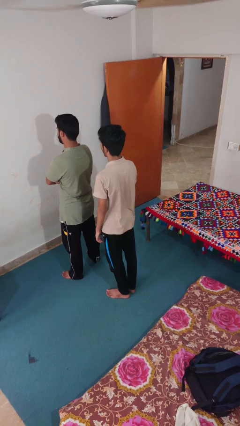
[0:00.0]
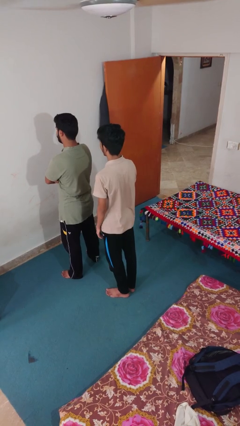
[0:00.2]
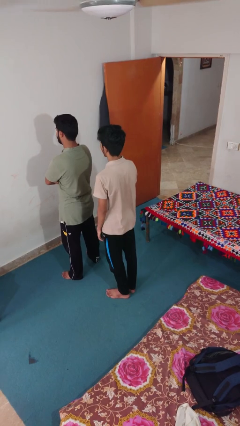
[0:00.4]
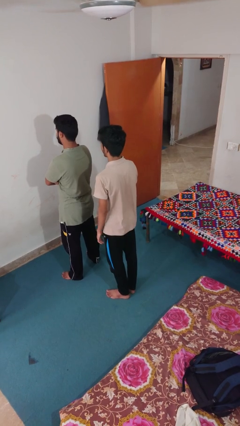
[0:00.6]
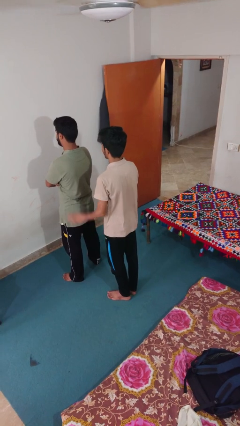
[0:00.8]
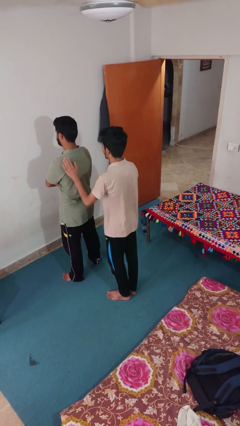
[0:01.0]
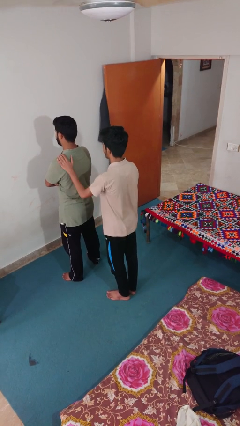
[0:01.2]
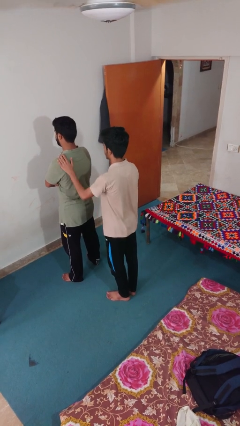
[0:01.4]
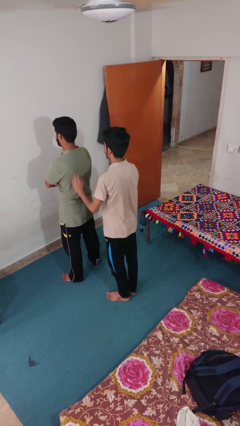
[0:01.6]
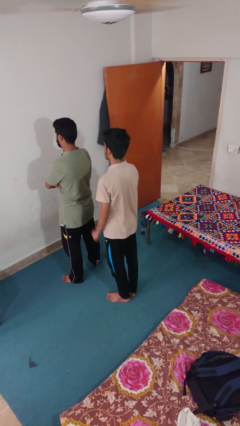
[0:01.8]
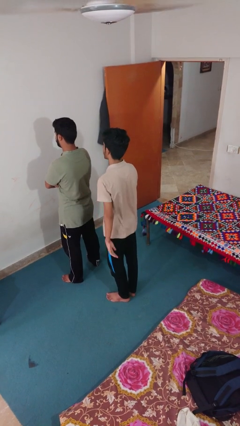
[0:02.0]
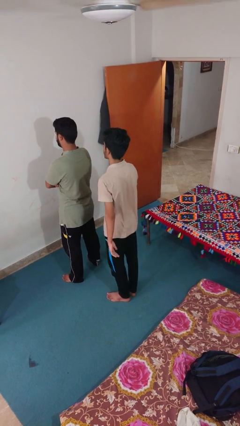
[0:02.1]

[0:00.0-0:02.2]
person touches back of person

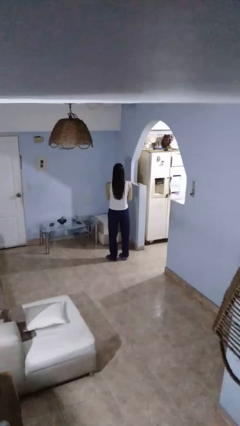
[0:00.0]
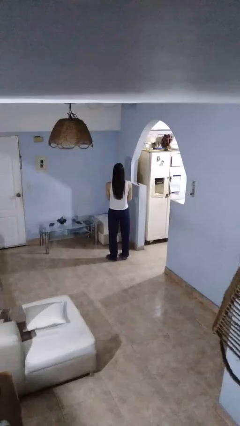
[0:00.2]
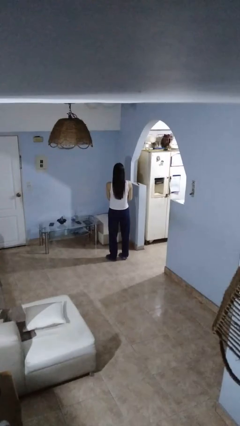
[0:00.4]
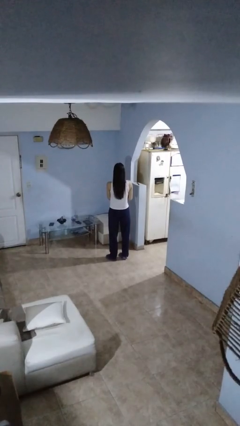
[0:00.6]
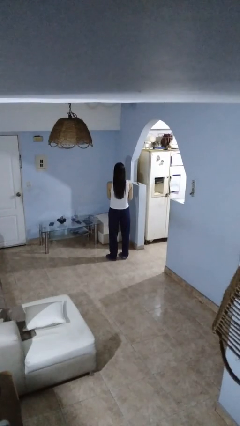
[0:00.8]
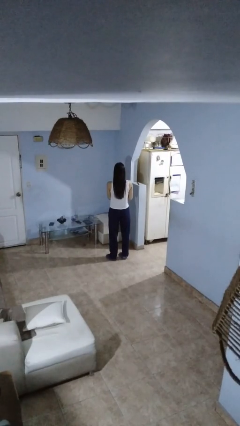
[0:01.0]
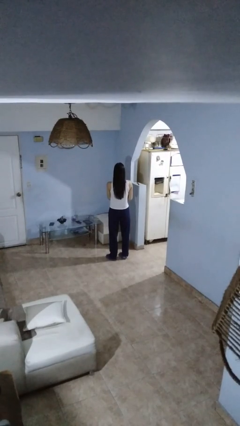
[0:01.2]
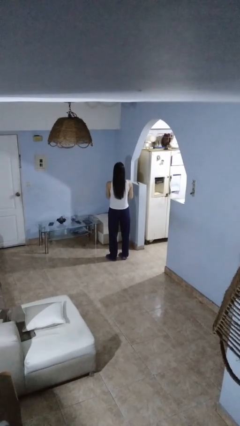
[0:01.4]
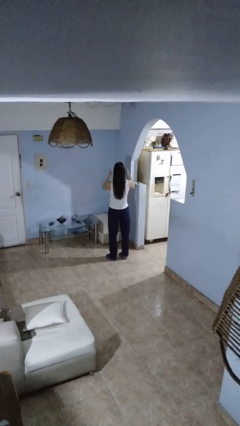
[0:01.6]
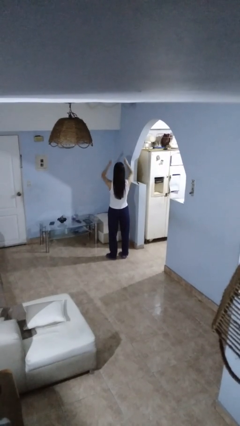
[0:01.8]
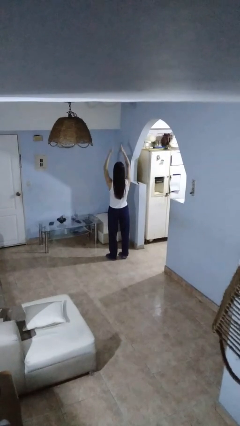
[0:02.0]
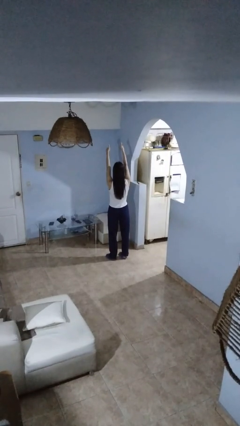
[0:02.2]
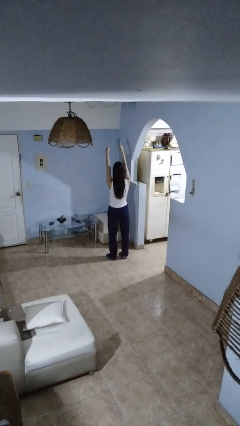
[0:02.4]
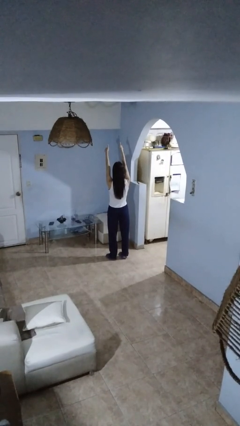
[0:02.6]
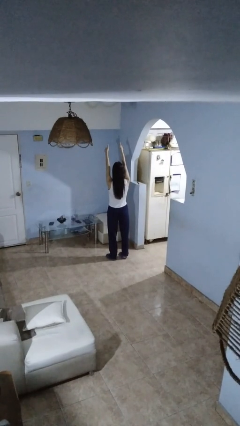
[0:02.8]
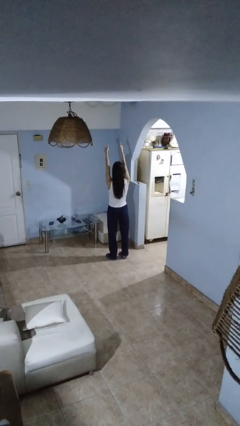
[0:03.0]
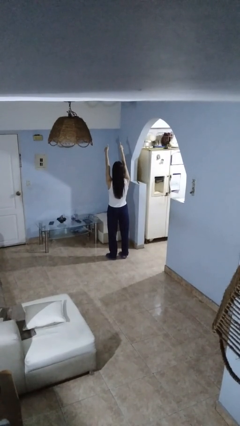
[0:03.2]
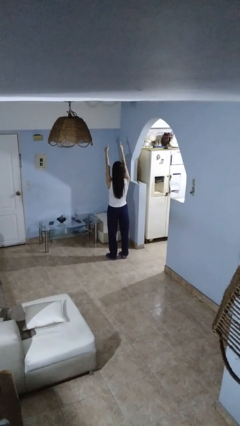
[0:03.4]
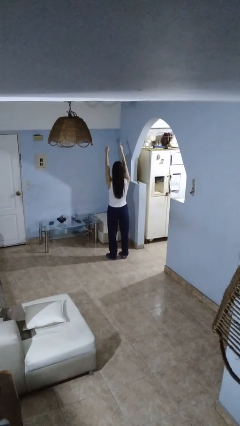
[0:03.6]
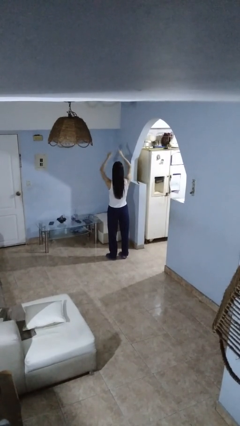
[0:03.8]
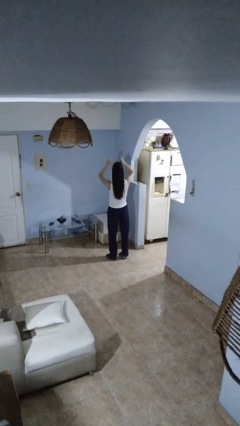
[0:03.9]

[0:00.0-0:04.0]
person gestures thumbs up

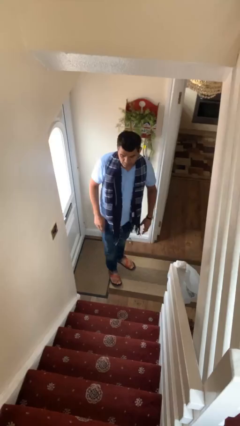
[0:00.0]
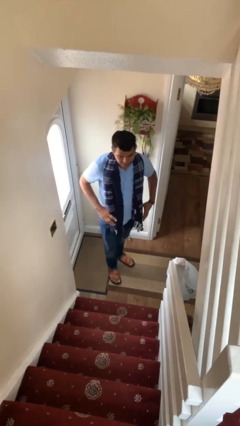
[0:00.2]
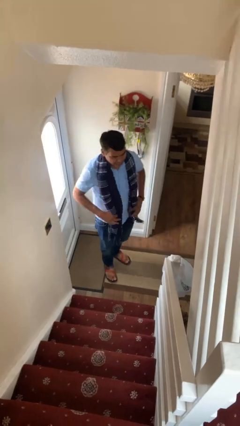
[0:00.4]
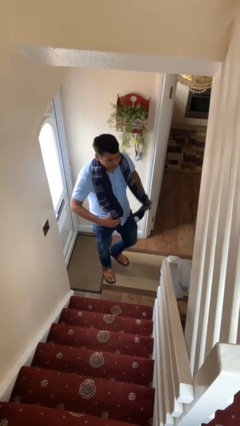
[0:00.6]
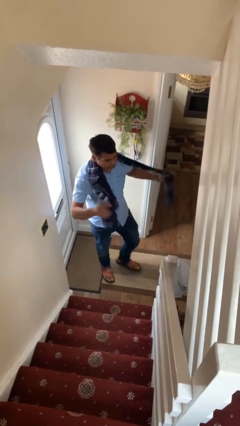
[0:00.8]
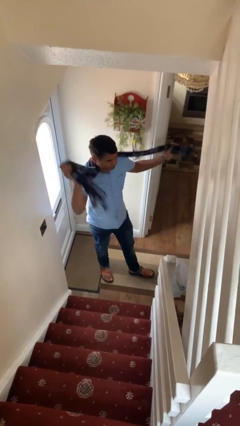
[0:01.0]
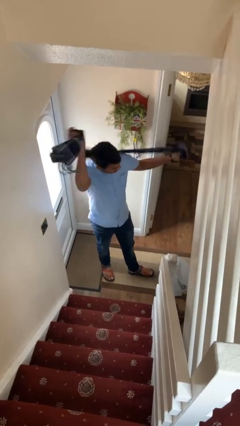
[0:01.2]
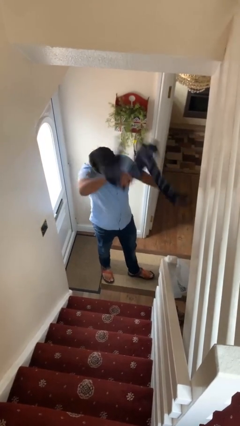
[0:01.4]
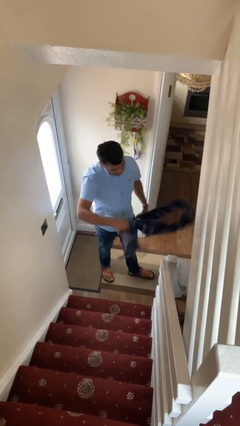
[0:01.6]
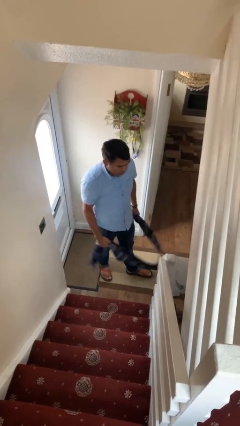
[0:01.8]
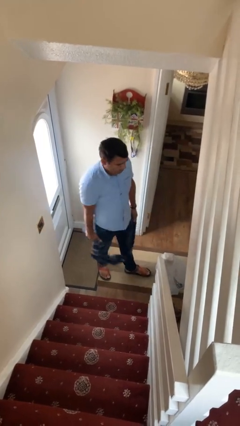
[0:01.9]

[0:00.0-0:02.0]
person takes off scarf

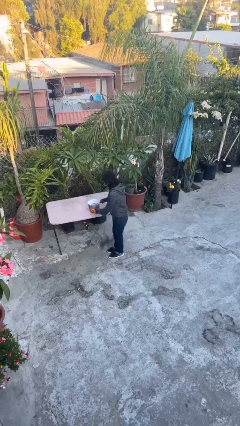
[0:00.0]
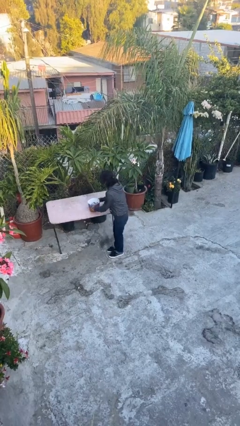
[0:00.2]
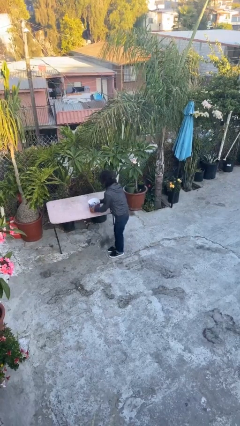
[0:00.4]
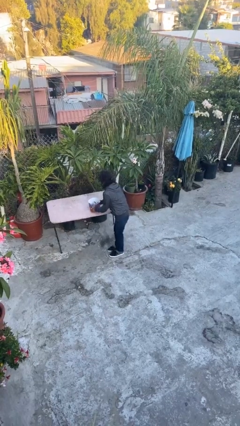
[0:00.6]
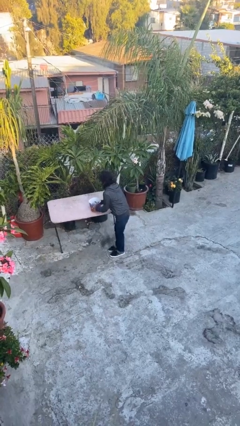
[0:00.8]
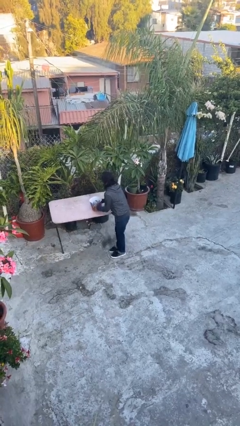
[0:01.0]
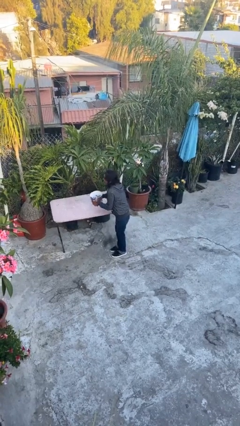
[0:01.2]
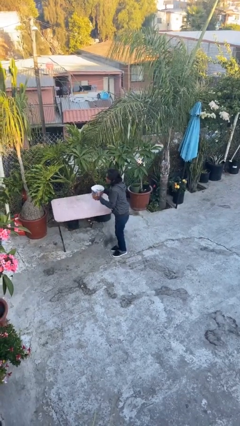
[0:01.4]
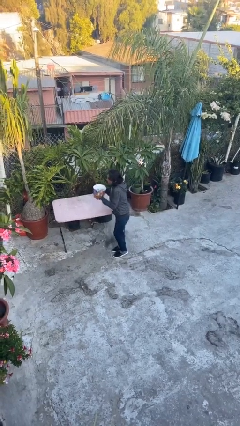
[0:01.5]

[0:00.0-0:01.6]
person picks up object from table

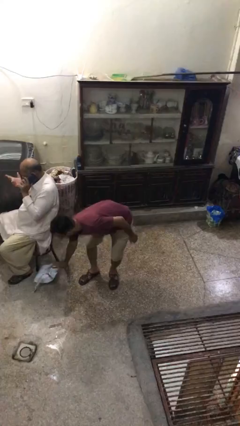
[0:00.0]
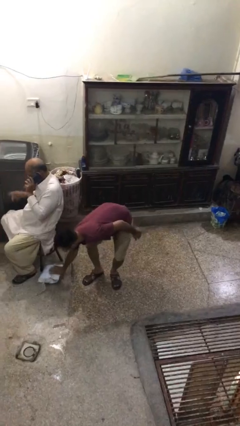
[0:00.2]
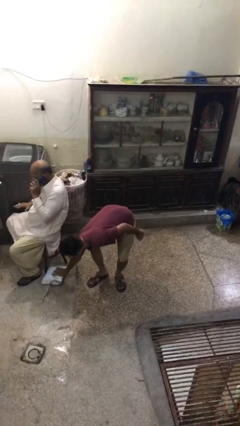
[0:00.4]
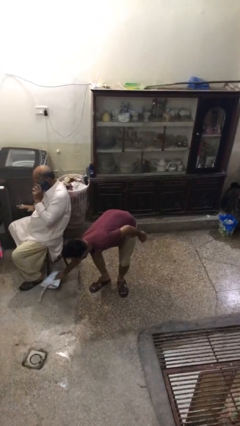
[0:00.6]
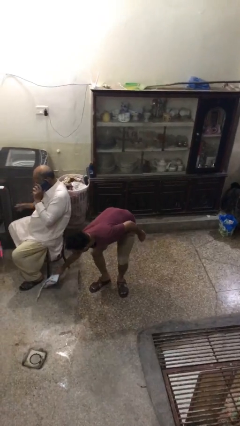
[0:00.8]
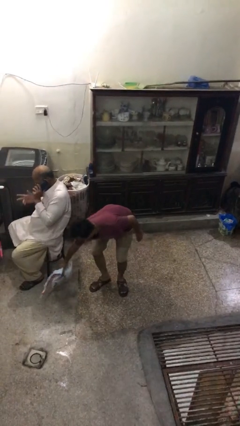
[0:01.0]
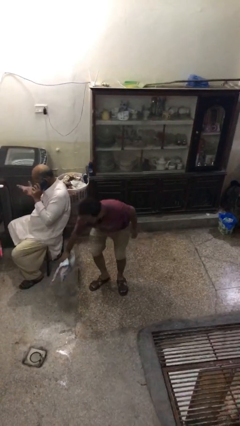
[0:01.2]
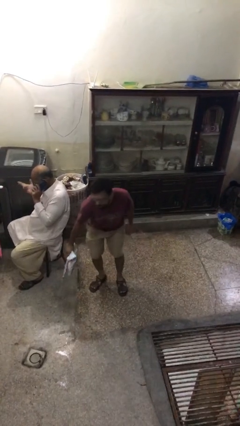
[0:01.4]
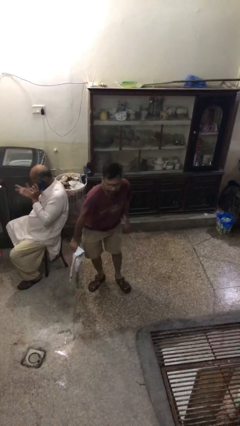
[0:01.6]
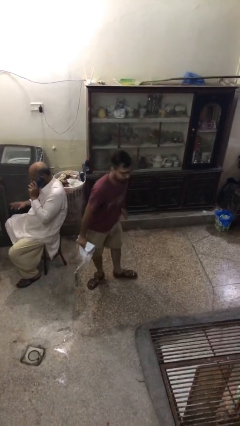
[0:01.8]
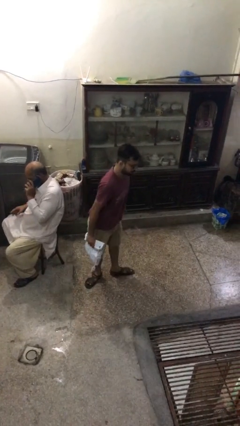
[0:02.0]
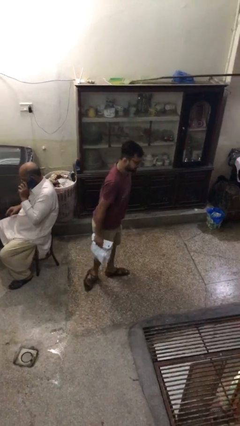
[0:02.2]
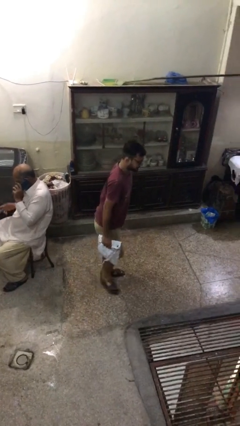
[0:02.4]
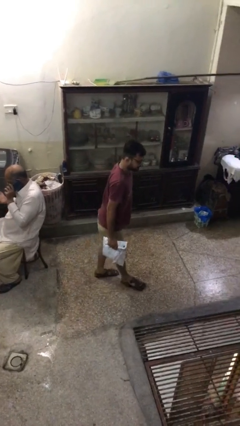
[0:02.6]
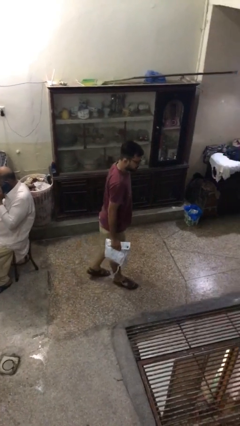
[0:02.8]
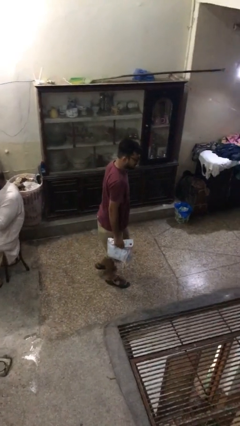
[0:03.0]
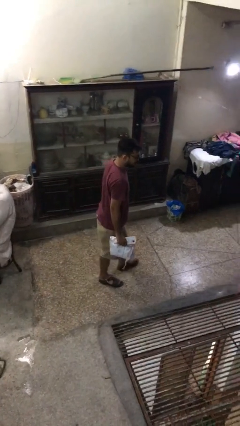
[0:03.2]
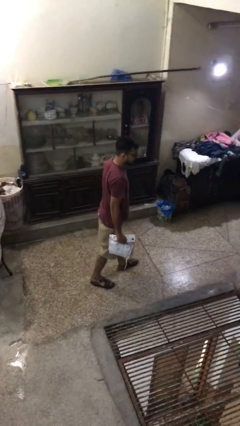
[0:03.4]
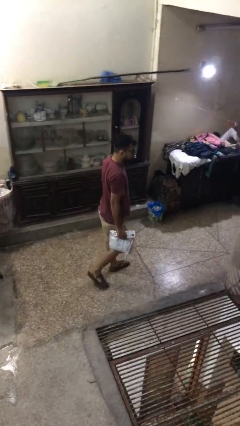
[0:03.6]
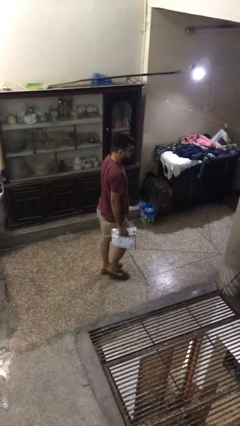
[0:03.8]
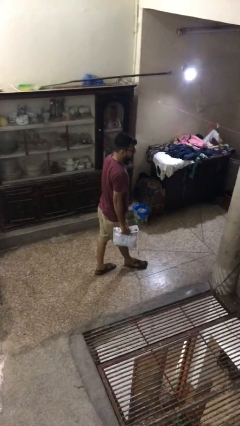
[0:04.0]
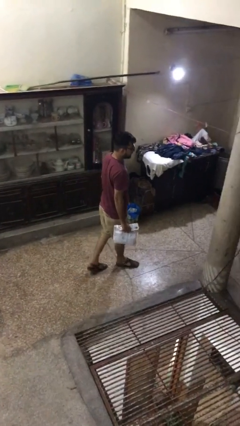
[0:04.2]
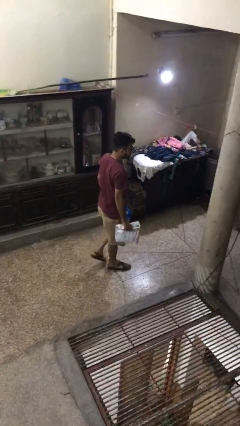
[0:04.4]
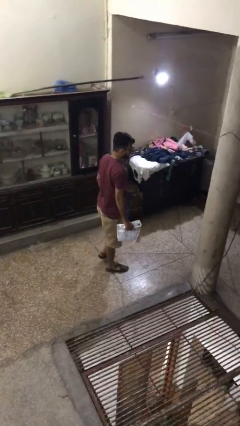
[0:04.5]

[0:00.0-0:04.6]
person steals object from person

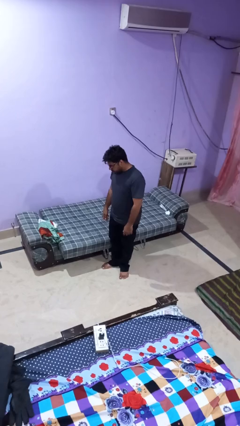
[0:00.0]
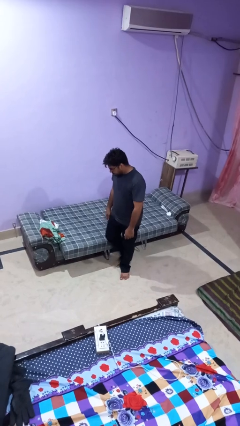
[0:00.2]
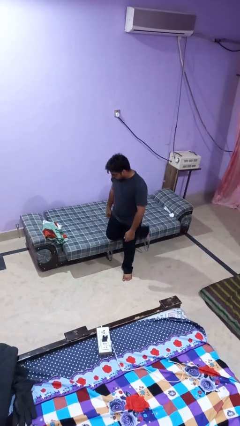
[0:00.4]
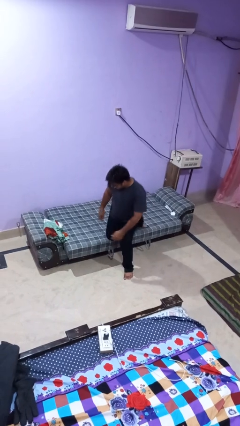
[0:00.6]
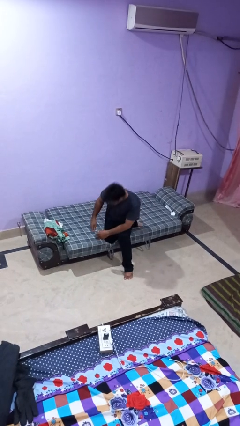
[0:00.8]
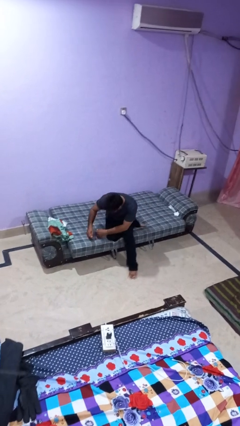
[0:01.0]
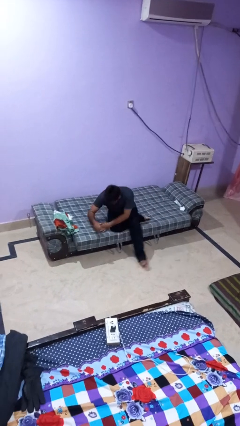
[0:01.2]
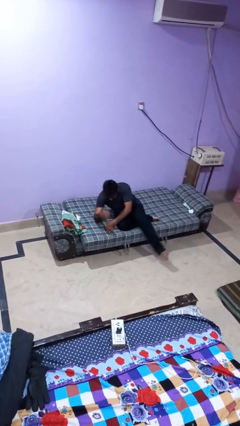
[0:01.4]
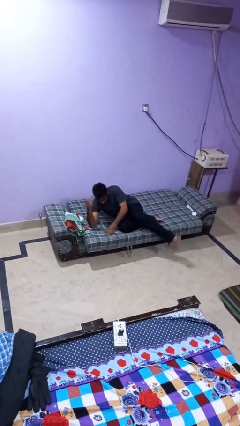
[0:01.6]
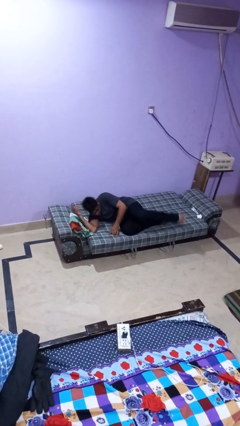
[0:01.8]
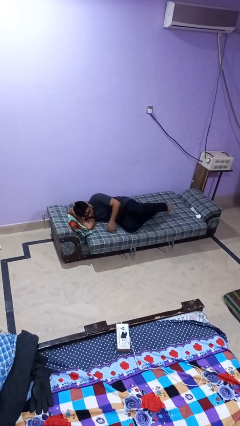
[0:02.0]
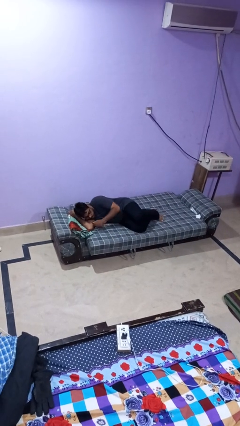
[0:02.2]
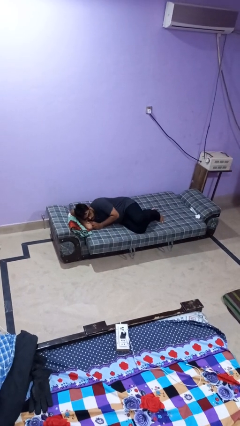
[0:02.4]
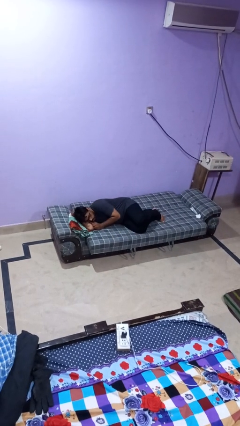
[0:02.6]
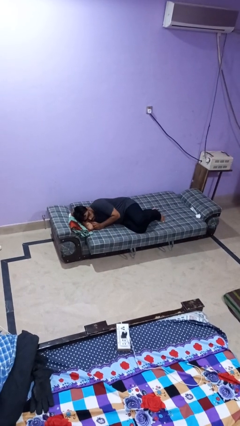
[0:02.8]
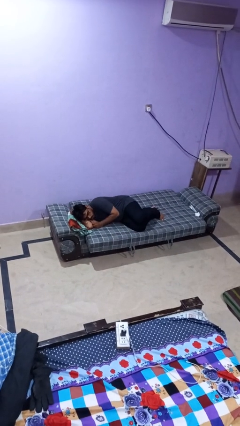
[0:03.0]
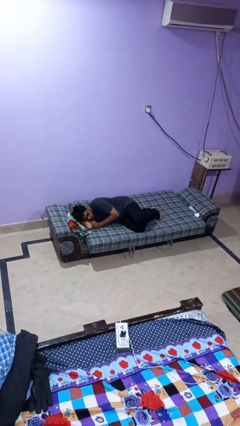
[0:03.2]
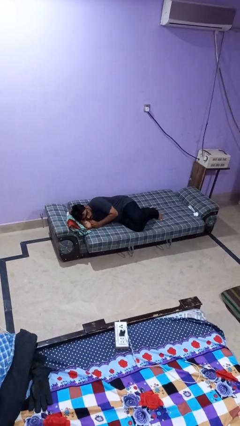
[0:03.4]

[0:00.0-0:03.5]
person lies down on bed
